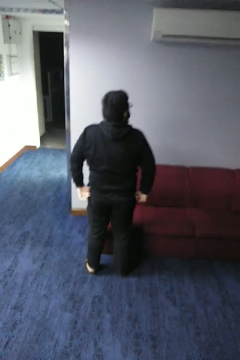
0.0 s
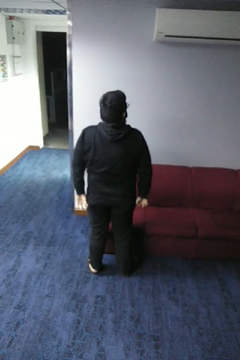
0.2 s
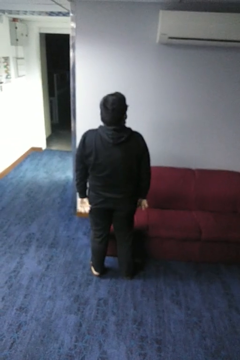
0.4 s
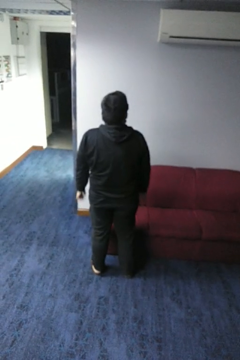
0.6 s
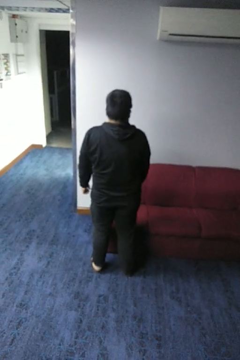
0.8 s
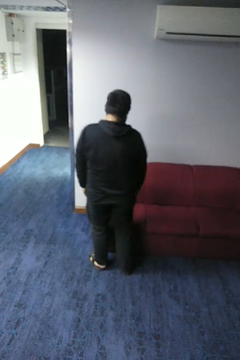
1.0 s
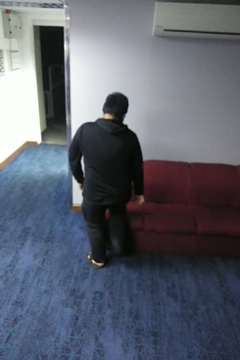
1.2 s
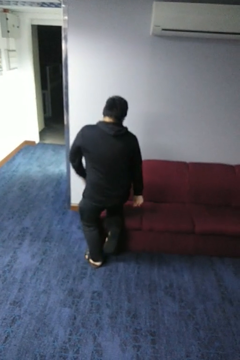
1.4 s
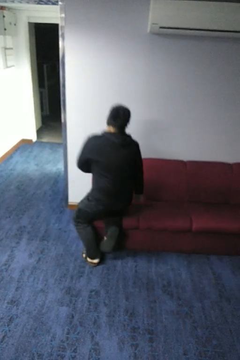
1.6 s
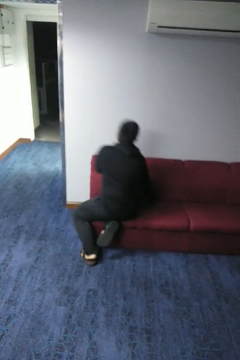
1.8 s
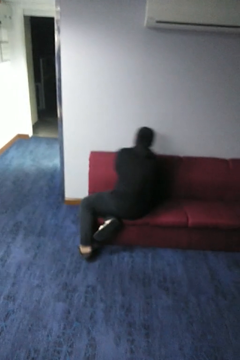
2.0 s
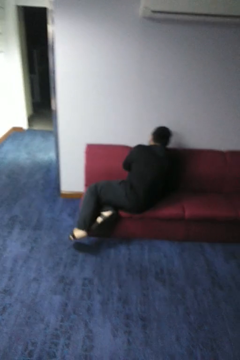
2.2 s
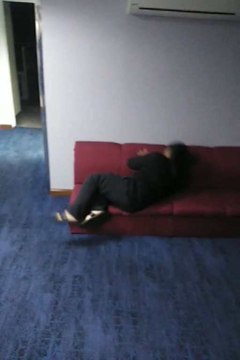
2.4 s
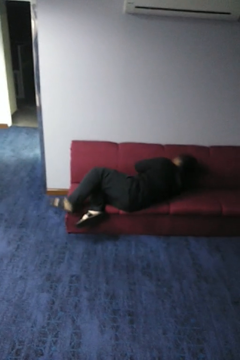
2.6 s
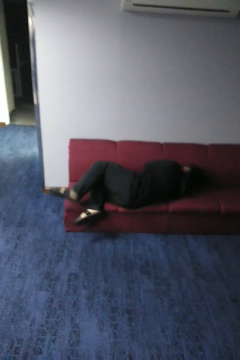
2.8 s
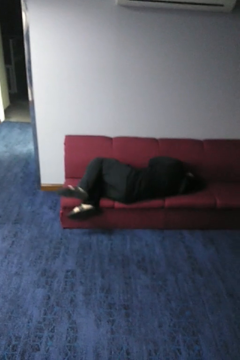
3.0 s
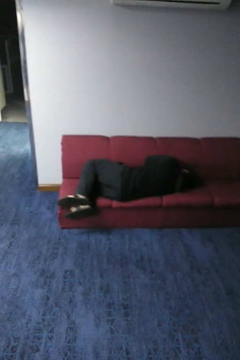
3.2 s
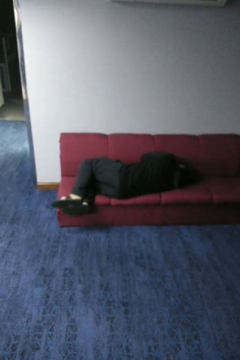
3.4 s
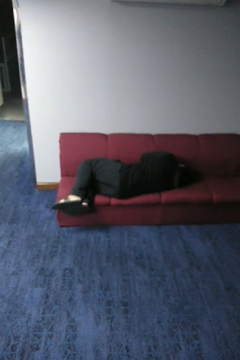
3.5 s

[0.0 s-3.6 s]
person lies down on couch

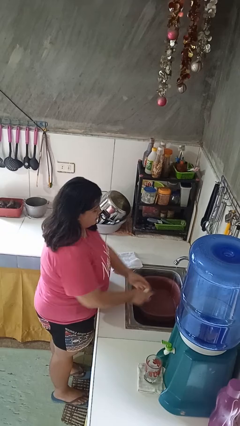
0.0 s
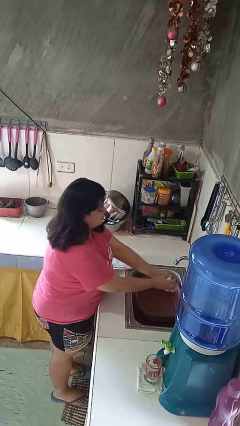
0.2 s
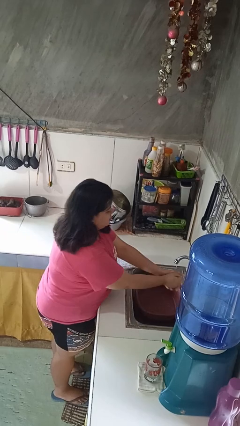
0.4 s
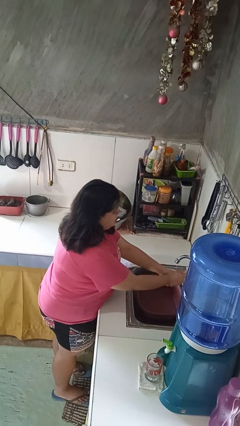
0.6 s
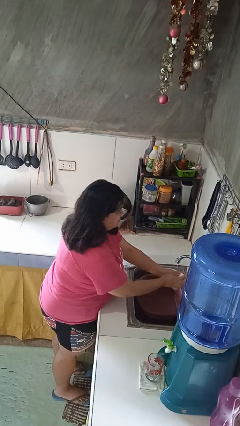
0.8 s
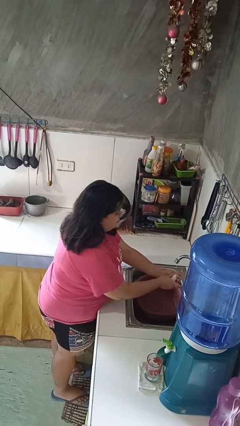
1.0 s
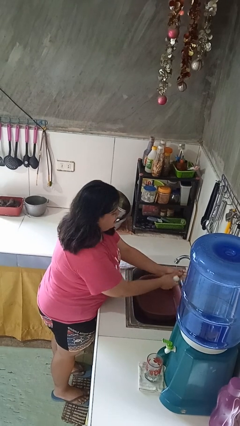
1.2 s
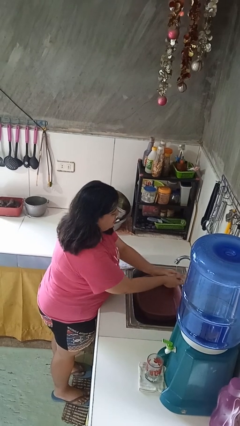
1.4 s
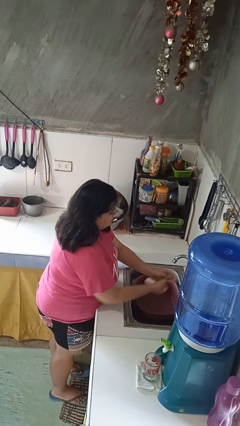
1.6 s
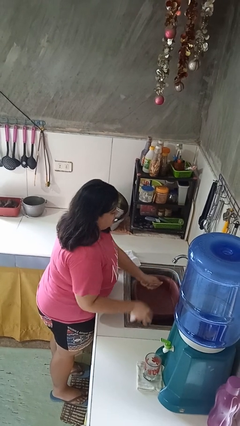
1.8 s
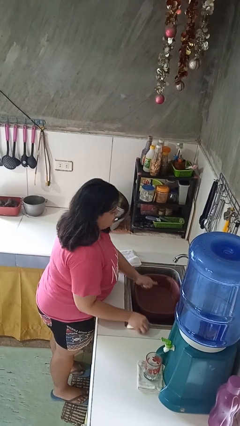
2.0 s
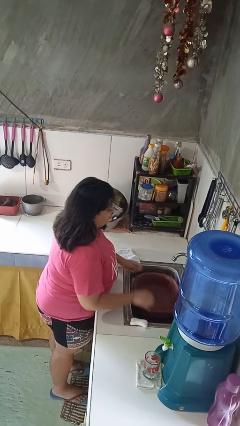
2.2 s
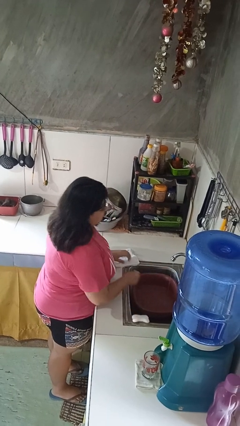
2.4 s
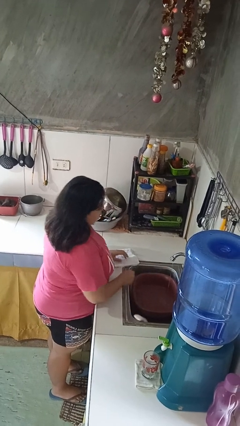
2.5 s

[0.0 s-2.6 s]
person washes hands

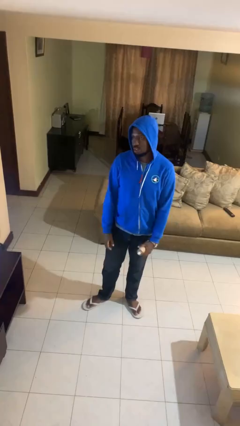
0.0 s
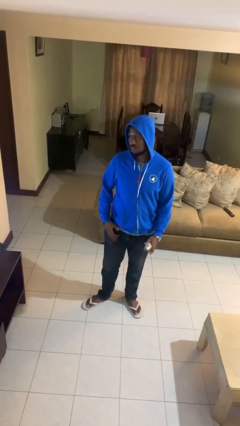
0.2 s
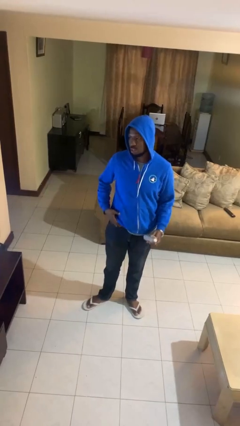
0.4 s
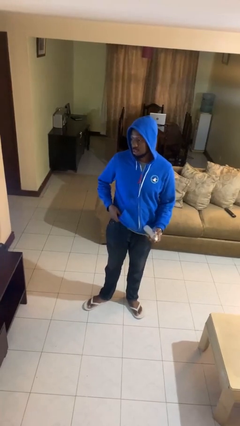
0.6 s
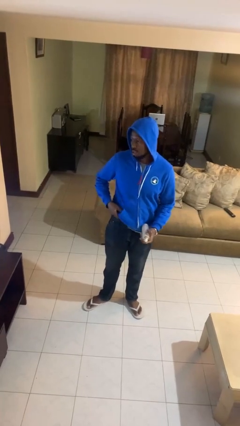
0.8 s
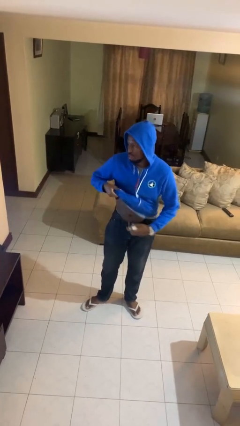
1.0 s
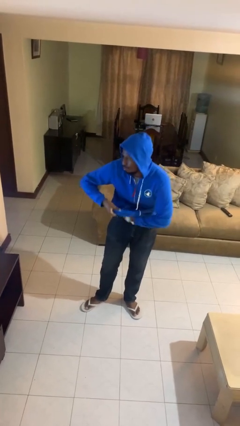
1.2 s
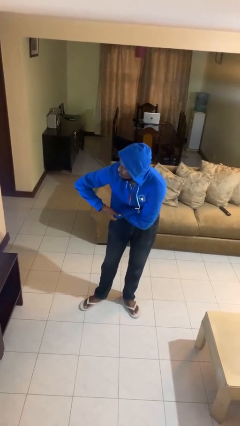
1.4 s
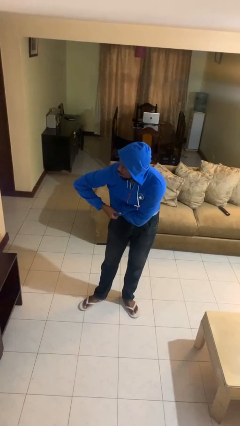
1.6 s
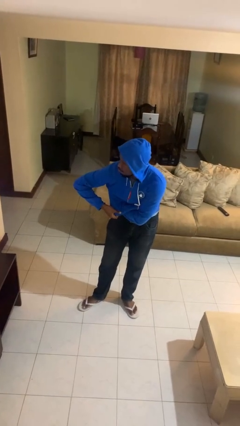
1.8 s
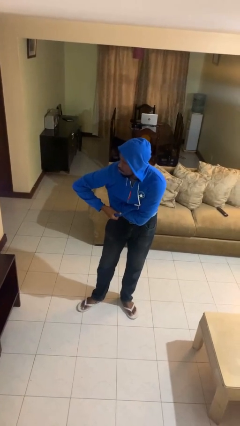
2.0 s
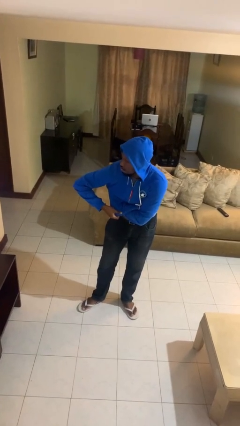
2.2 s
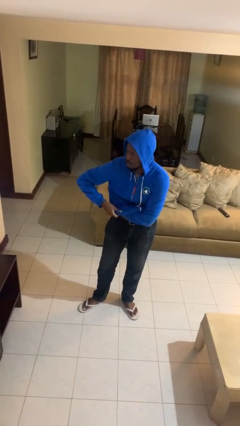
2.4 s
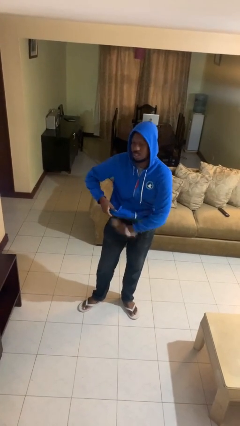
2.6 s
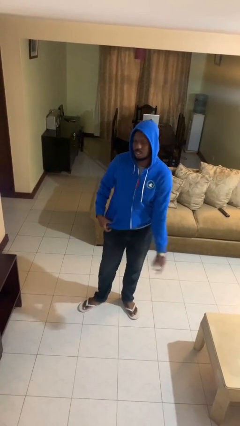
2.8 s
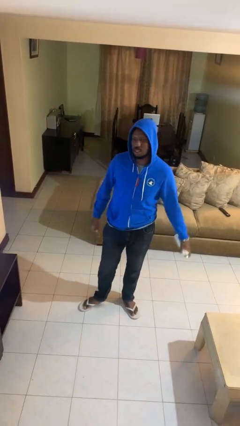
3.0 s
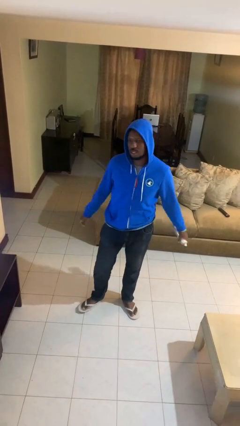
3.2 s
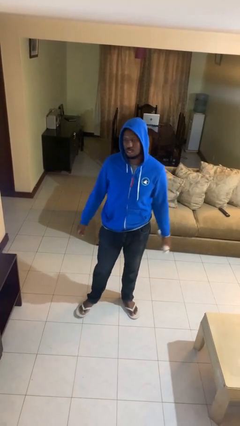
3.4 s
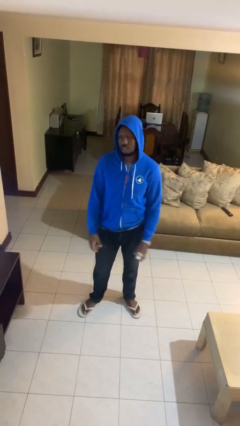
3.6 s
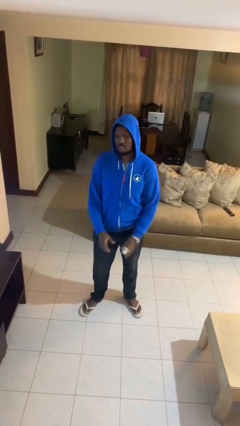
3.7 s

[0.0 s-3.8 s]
person applies deodorant

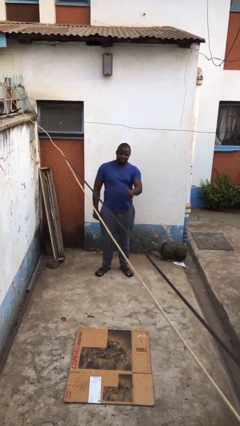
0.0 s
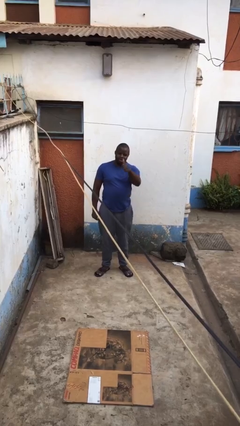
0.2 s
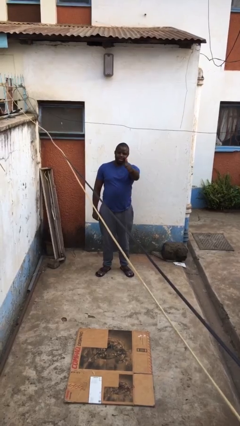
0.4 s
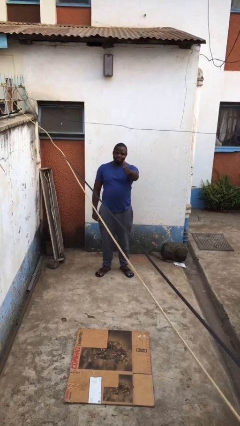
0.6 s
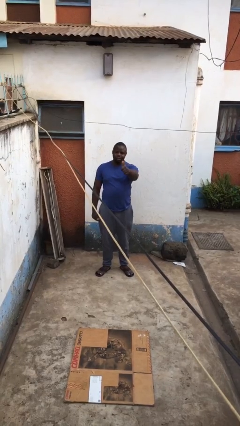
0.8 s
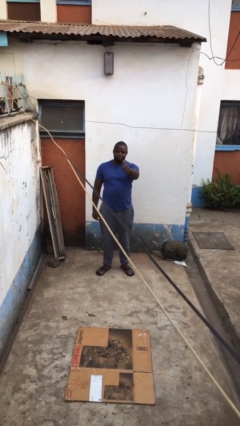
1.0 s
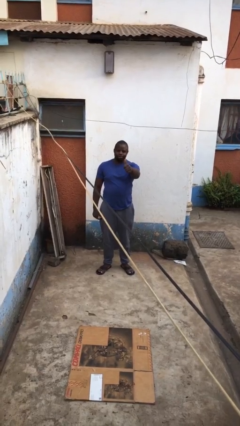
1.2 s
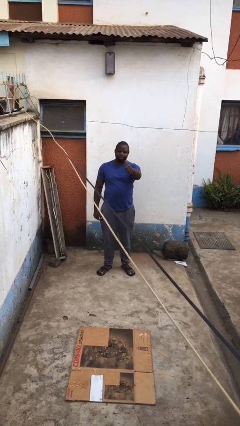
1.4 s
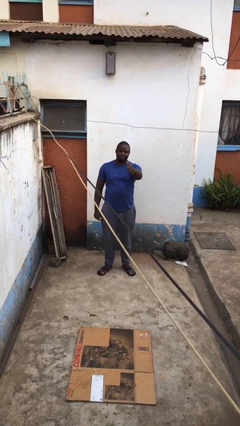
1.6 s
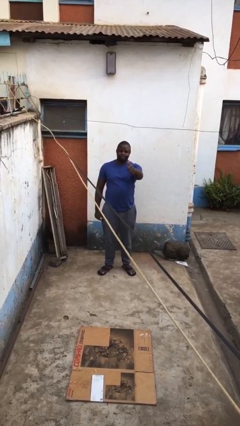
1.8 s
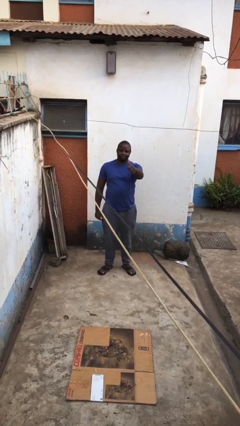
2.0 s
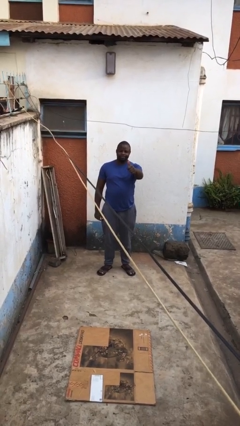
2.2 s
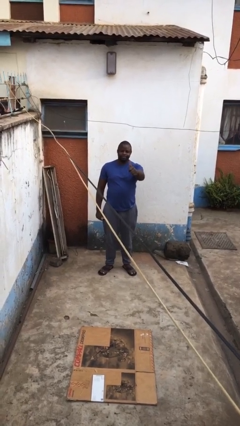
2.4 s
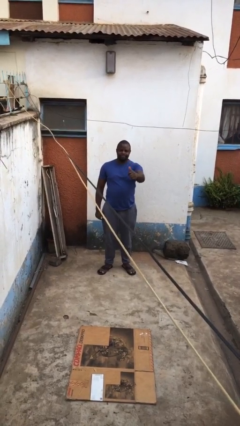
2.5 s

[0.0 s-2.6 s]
person gestures thumbs up

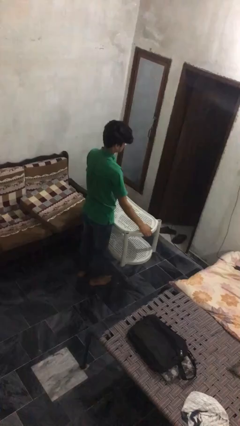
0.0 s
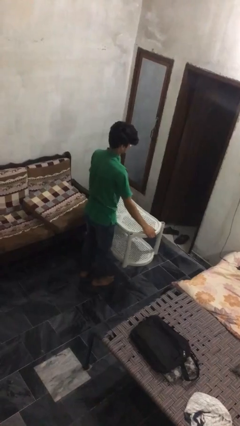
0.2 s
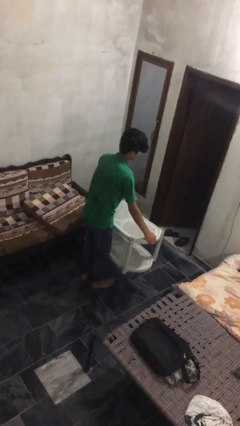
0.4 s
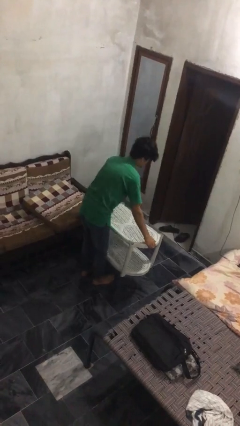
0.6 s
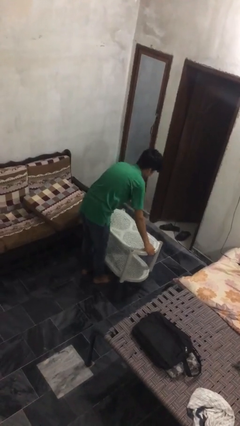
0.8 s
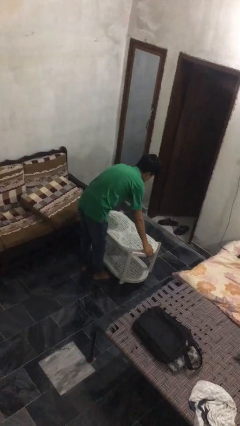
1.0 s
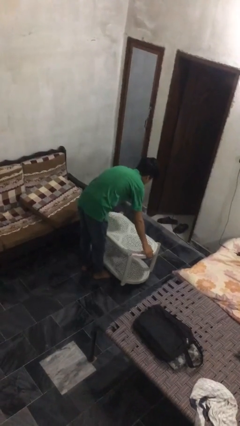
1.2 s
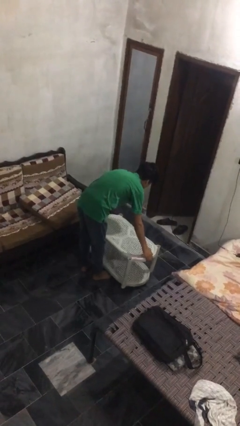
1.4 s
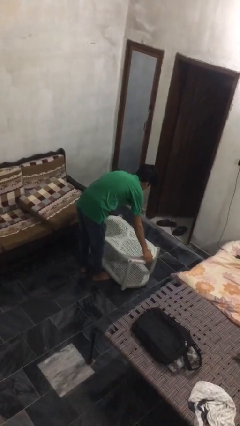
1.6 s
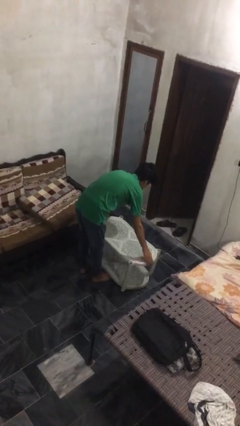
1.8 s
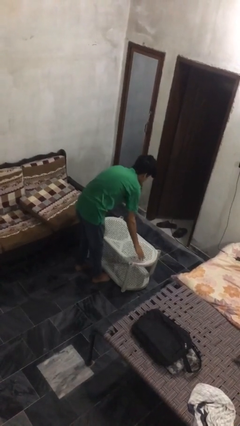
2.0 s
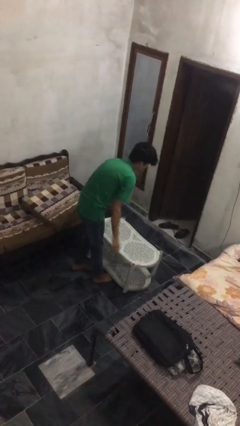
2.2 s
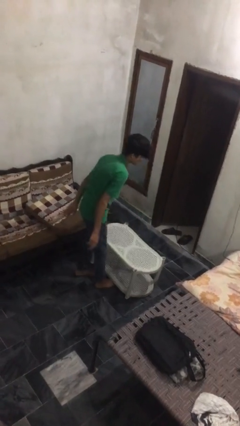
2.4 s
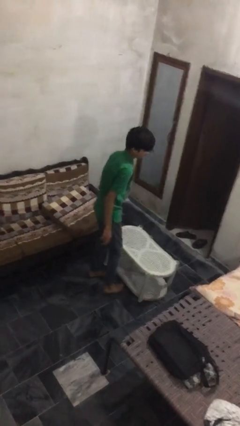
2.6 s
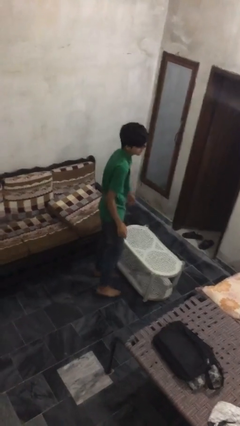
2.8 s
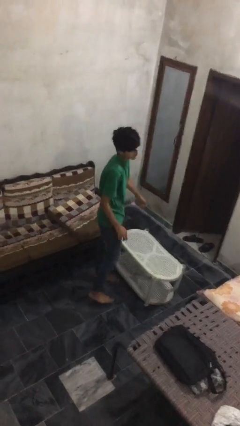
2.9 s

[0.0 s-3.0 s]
person puts down object on floor

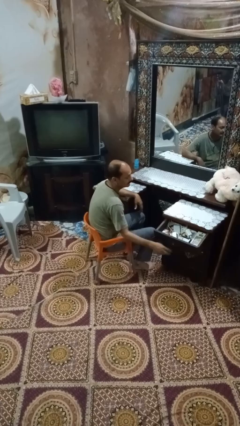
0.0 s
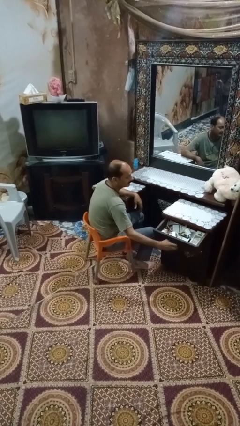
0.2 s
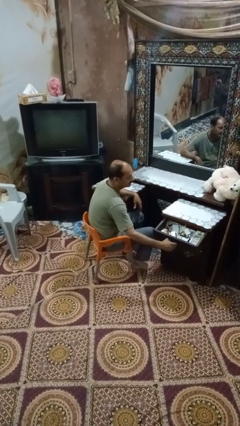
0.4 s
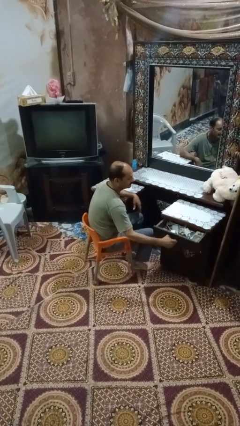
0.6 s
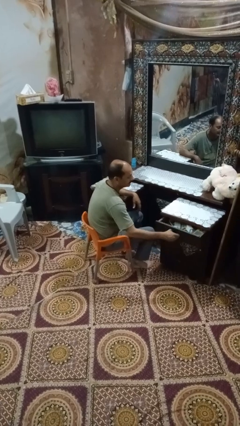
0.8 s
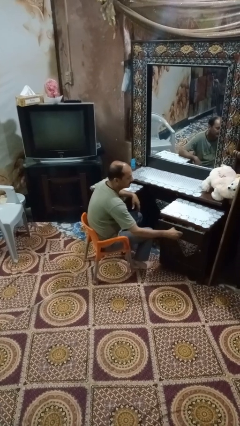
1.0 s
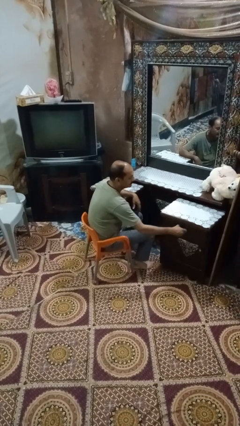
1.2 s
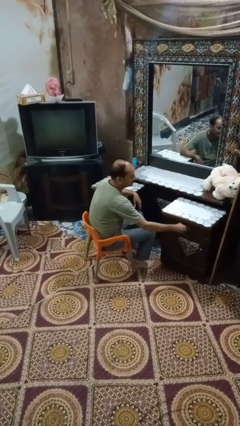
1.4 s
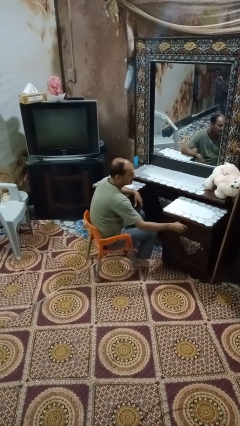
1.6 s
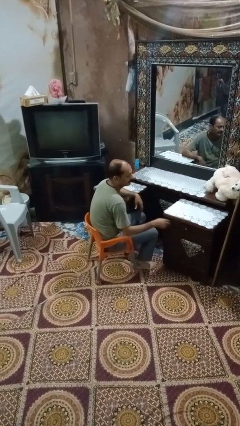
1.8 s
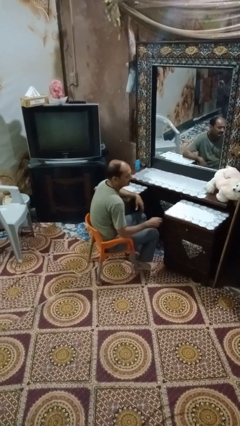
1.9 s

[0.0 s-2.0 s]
person closes dresser drawer
